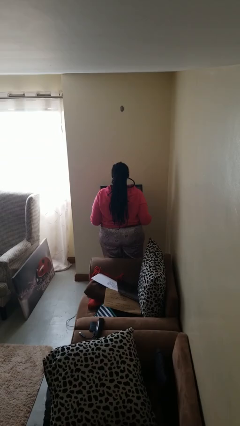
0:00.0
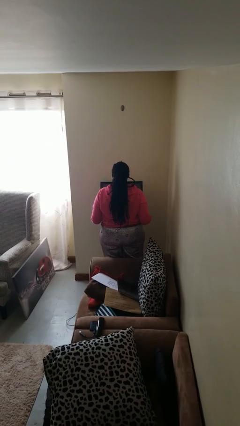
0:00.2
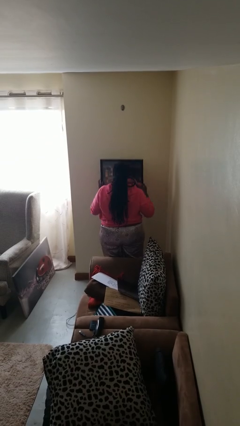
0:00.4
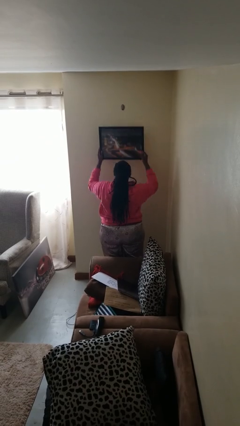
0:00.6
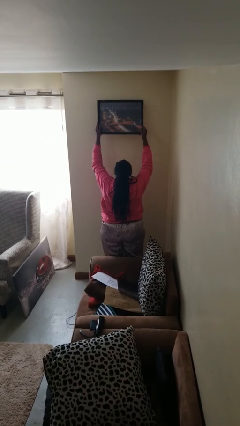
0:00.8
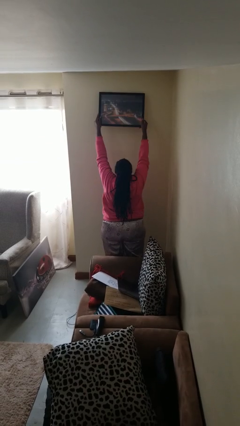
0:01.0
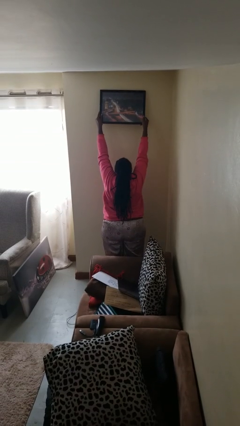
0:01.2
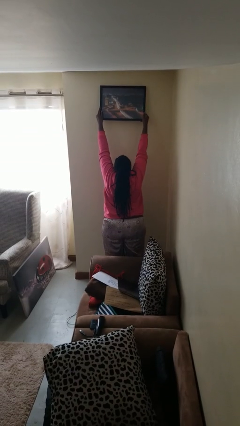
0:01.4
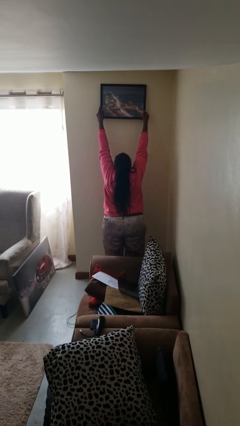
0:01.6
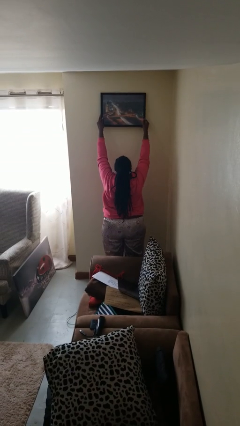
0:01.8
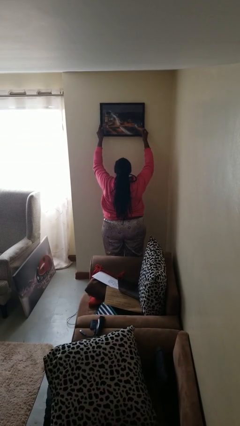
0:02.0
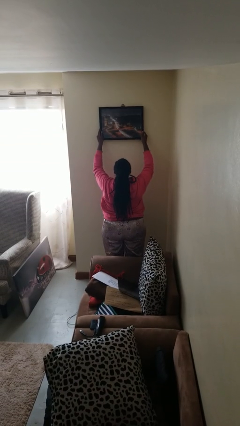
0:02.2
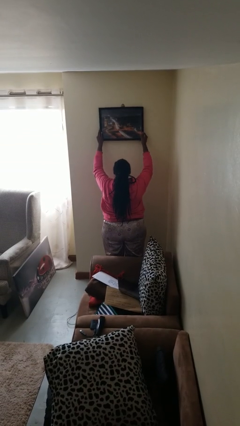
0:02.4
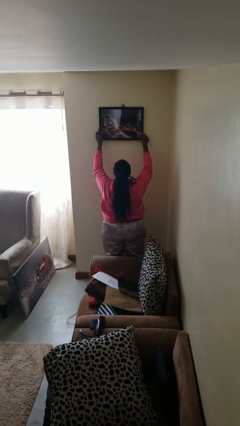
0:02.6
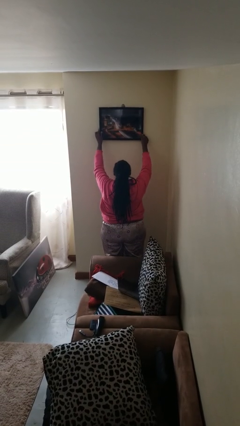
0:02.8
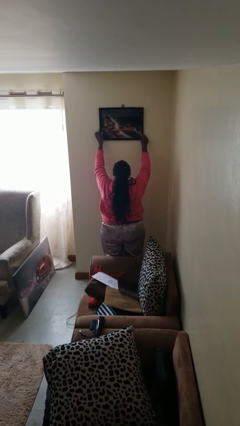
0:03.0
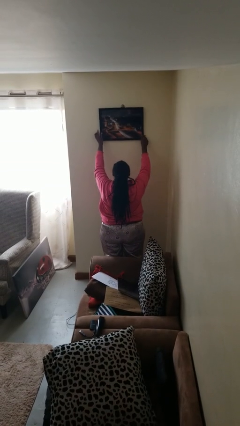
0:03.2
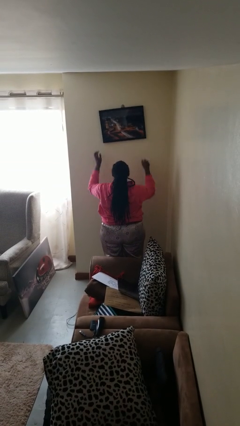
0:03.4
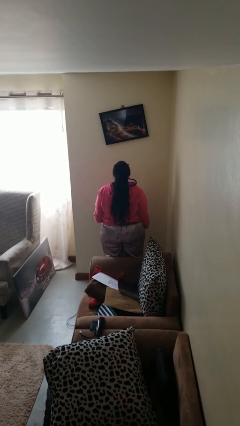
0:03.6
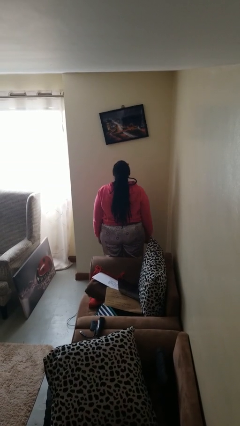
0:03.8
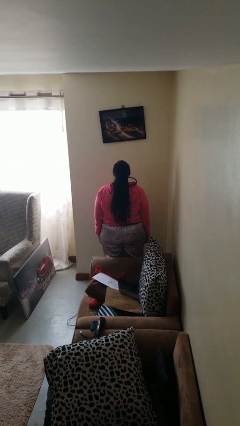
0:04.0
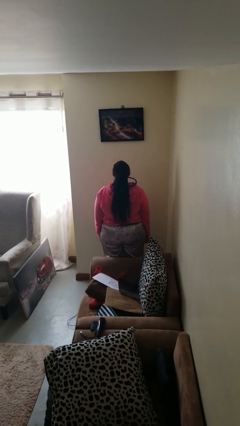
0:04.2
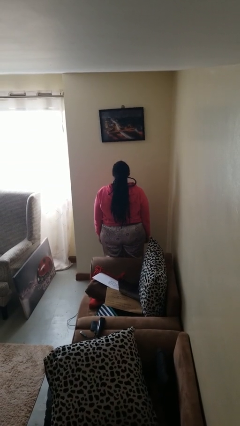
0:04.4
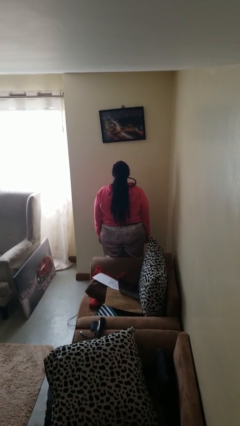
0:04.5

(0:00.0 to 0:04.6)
person puts up picture frame

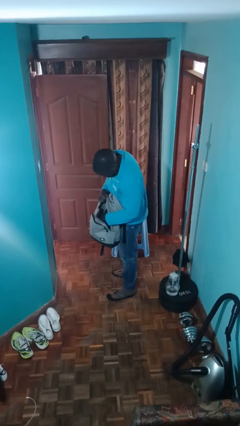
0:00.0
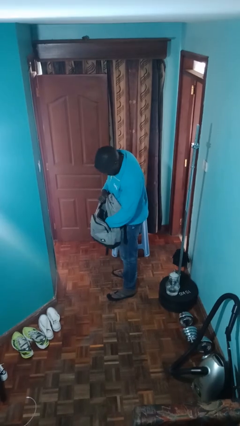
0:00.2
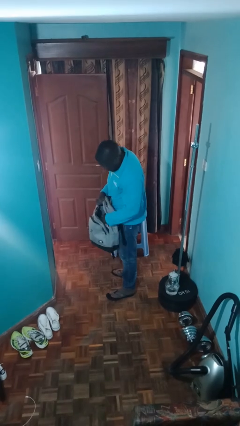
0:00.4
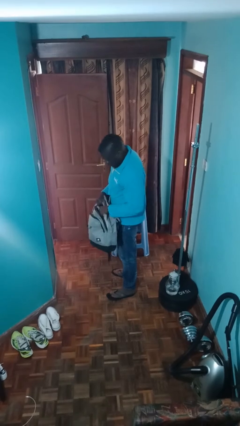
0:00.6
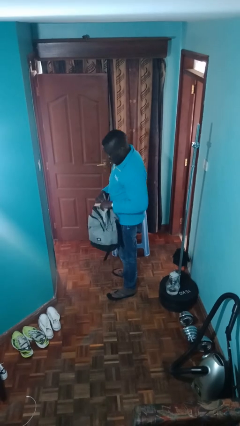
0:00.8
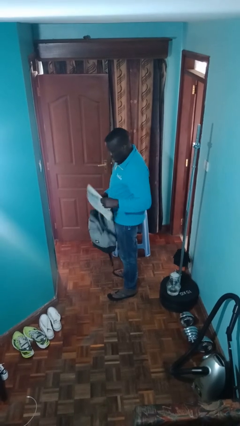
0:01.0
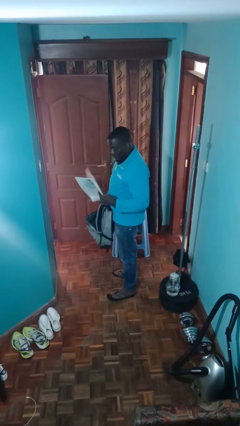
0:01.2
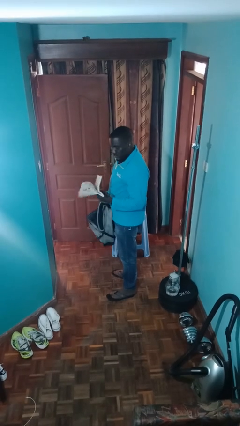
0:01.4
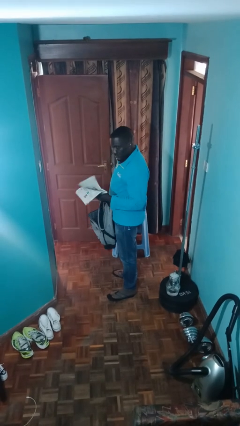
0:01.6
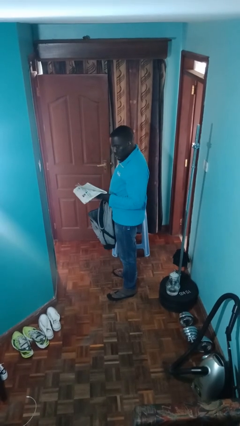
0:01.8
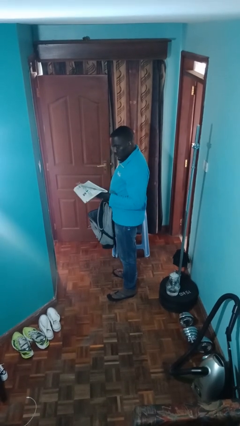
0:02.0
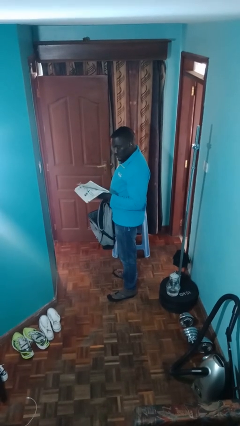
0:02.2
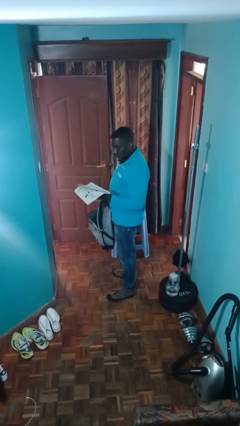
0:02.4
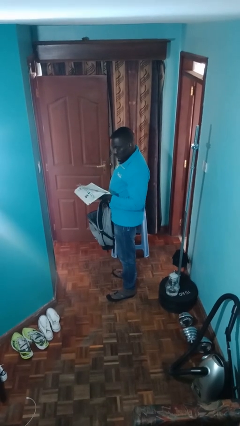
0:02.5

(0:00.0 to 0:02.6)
person takes object from backpack

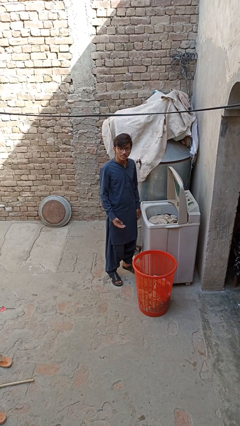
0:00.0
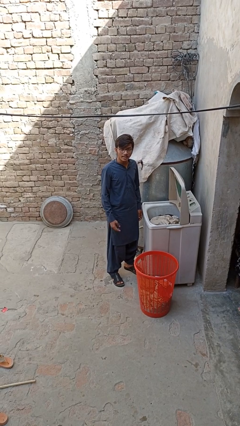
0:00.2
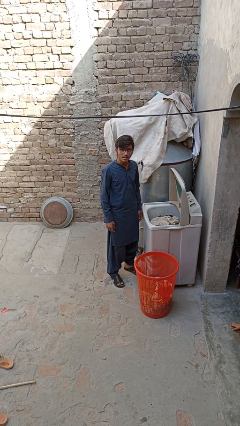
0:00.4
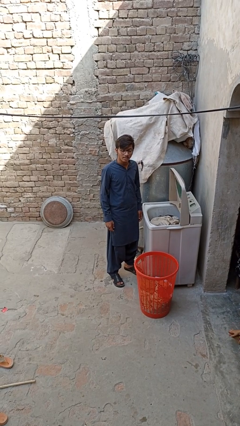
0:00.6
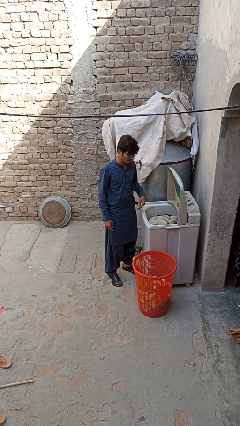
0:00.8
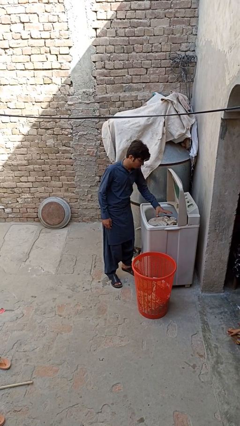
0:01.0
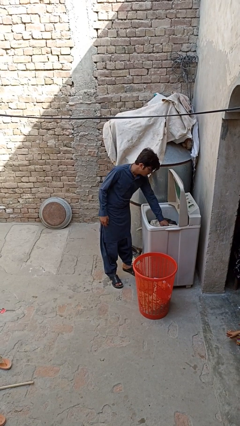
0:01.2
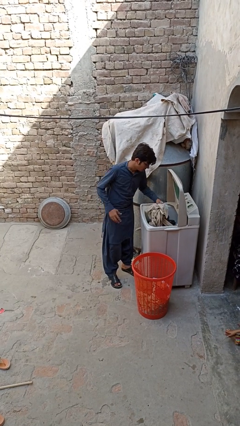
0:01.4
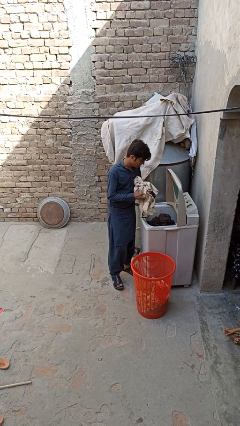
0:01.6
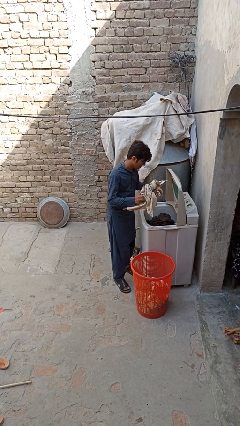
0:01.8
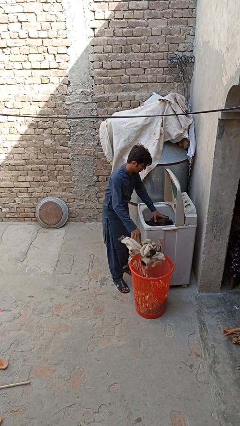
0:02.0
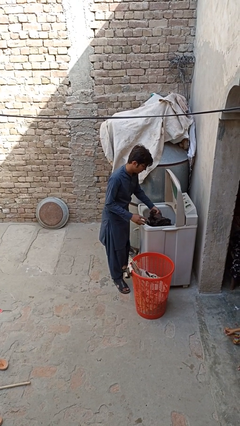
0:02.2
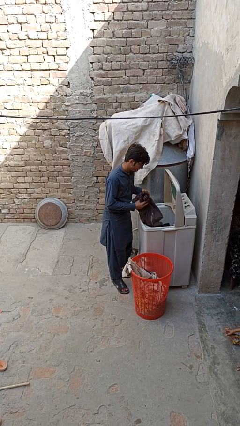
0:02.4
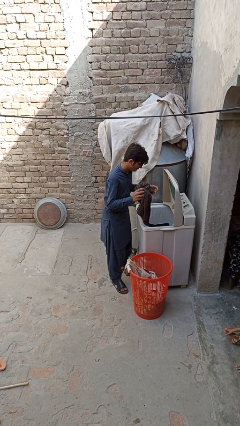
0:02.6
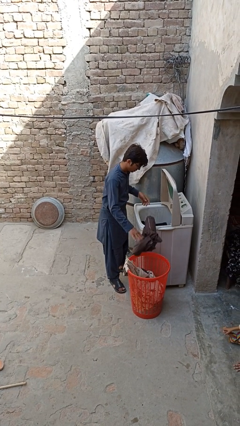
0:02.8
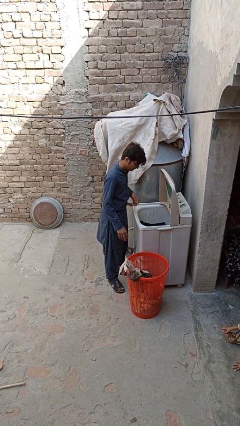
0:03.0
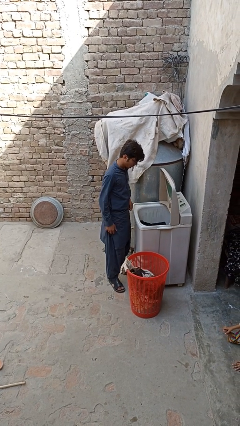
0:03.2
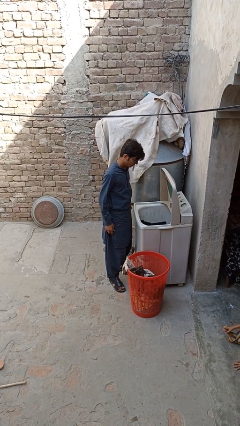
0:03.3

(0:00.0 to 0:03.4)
person unloads clotheswasher

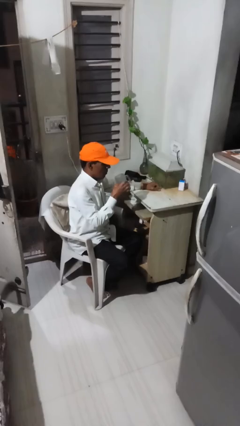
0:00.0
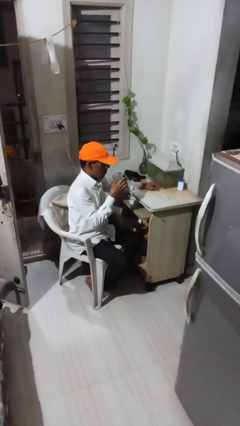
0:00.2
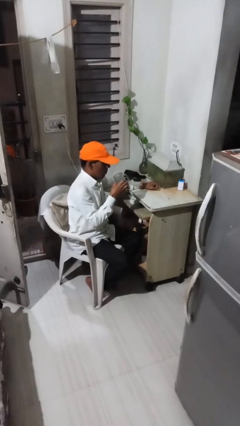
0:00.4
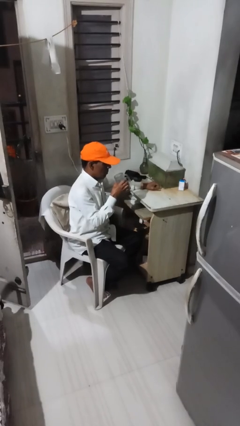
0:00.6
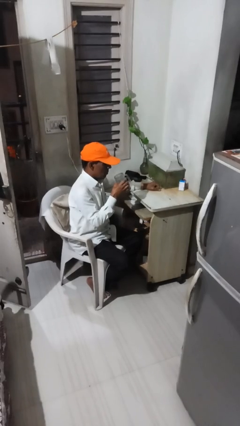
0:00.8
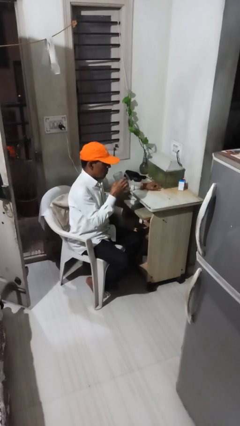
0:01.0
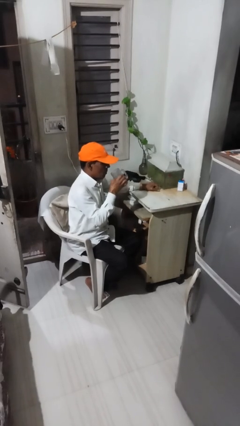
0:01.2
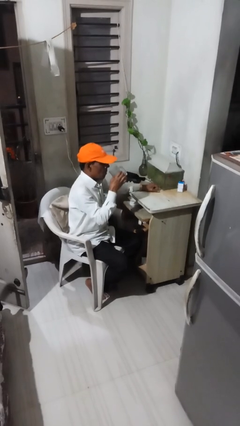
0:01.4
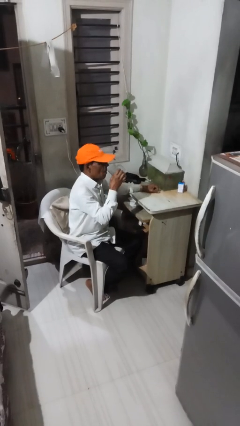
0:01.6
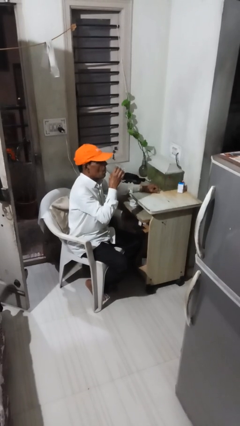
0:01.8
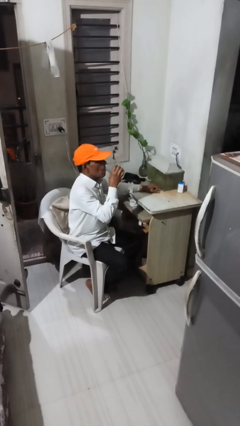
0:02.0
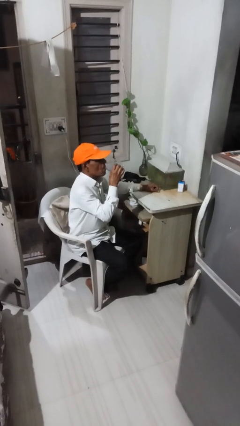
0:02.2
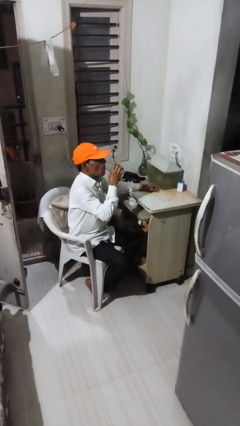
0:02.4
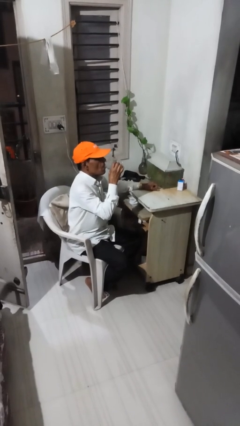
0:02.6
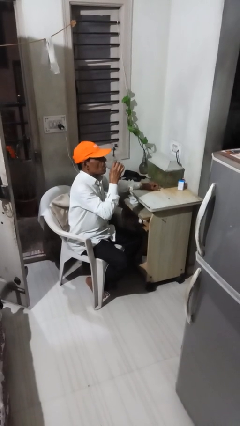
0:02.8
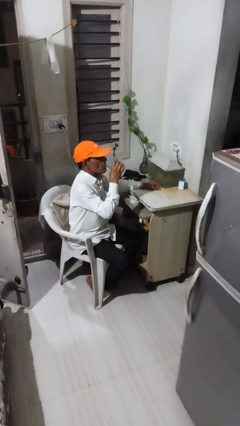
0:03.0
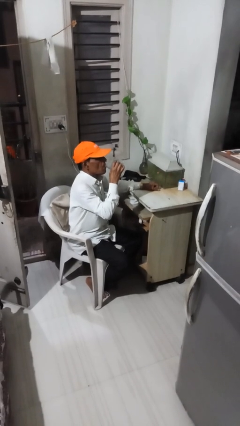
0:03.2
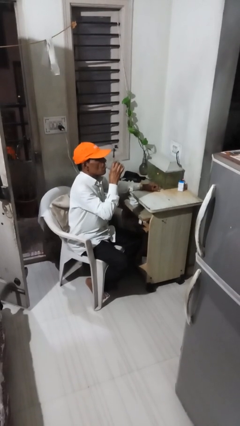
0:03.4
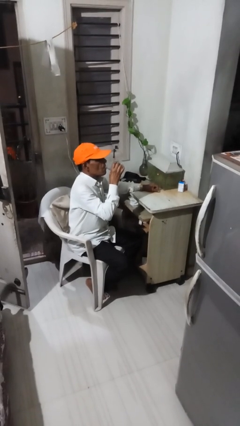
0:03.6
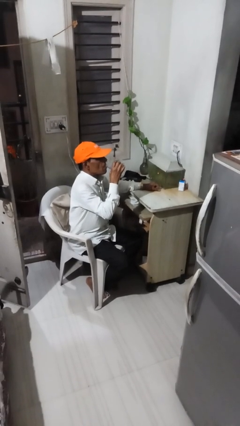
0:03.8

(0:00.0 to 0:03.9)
person drinks from mug

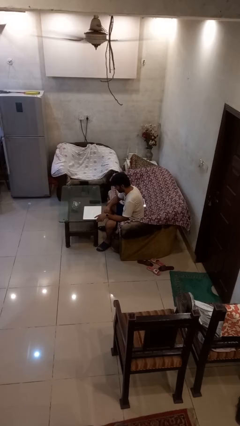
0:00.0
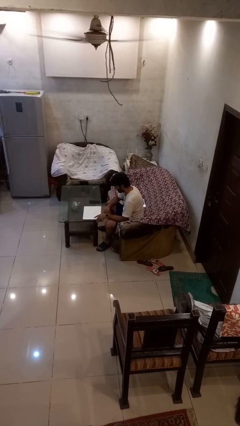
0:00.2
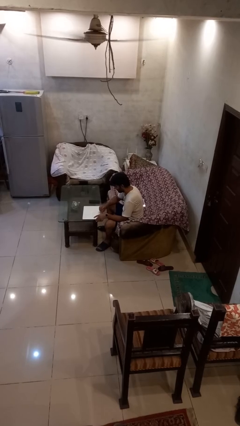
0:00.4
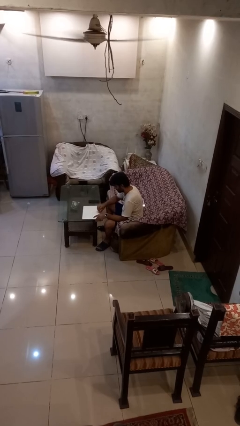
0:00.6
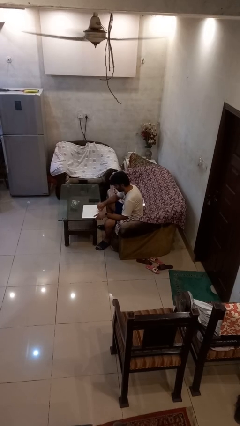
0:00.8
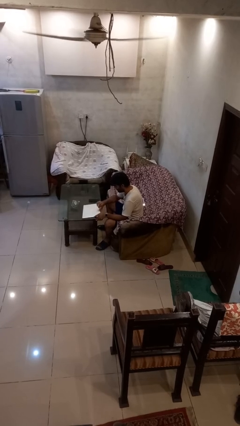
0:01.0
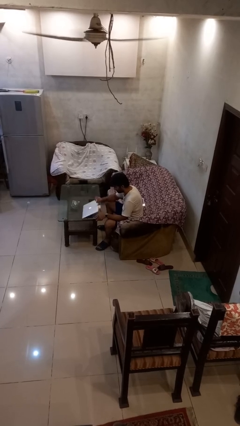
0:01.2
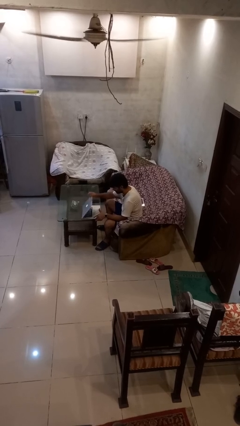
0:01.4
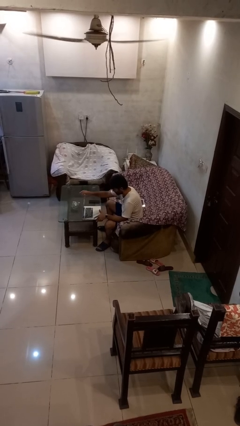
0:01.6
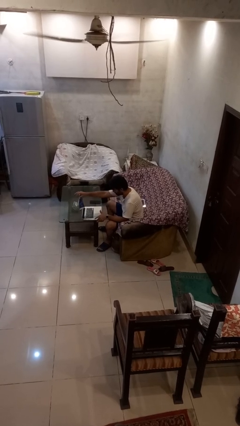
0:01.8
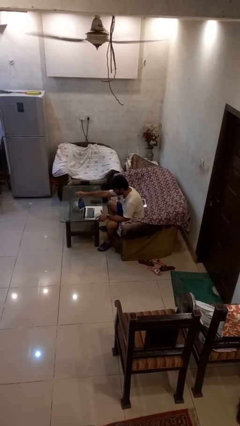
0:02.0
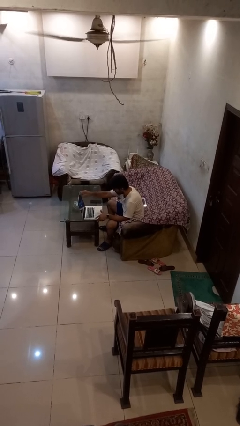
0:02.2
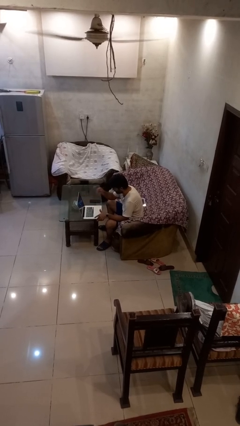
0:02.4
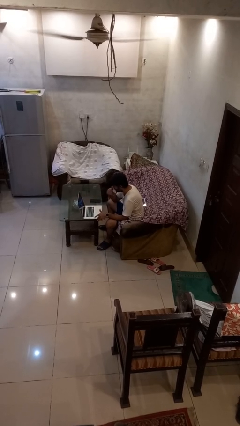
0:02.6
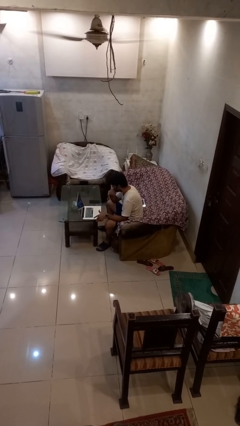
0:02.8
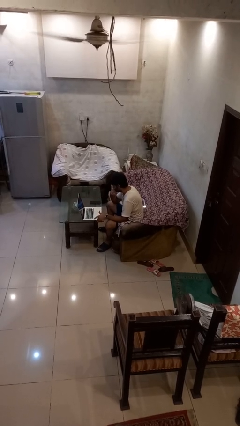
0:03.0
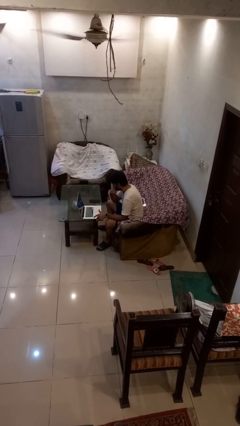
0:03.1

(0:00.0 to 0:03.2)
person opens laptop

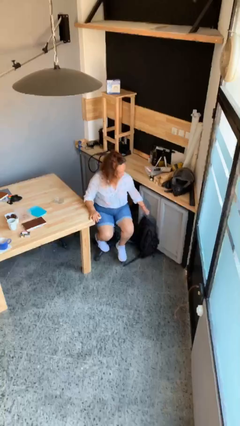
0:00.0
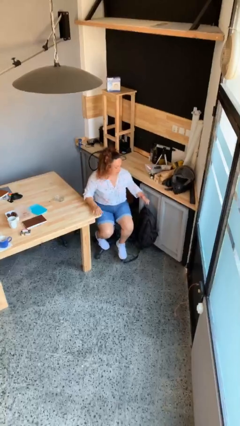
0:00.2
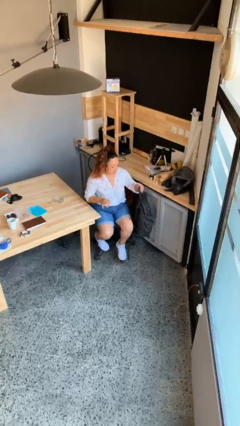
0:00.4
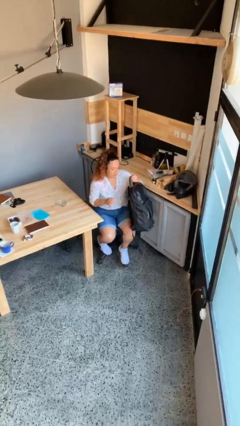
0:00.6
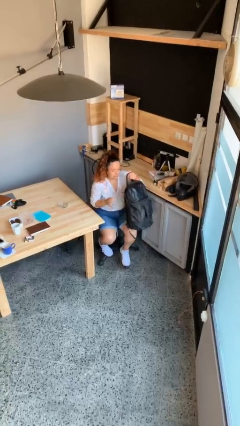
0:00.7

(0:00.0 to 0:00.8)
person picks up object from floor
